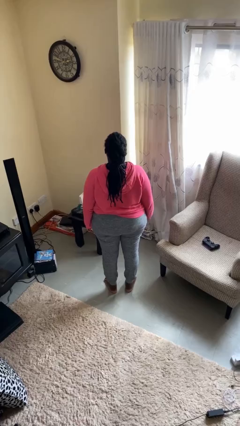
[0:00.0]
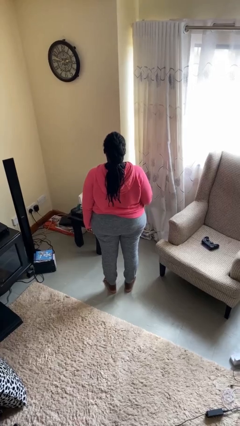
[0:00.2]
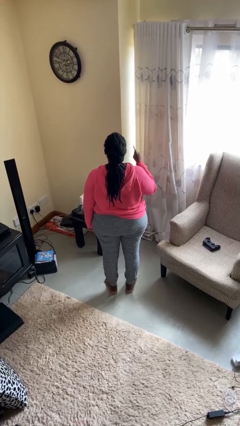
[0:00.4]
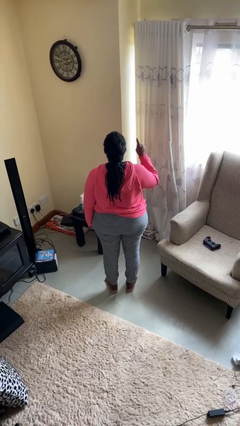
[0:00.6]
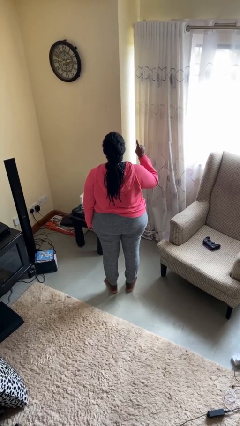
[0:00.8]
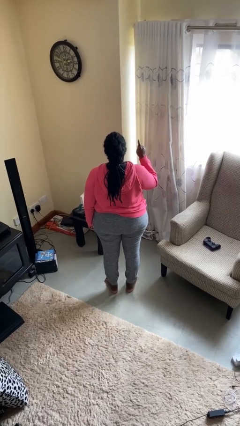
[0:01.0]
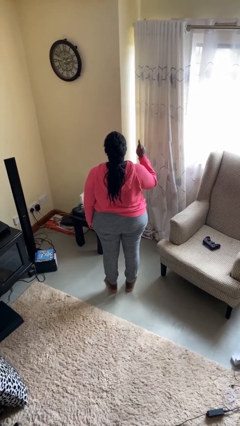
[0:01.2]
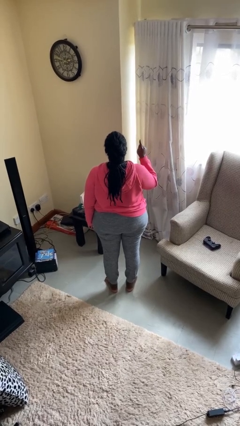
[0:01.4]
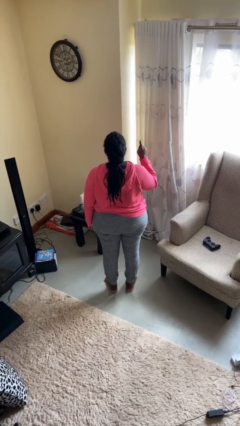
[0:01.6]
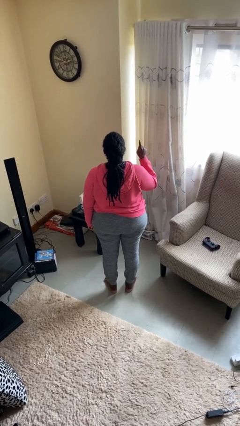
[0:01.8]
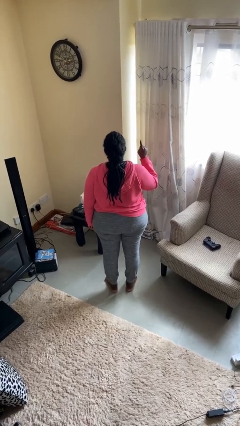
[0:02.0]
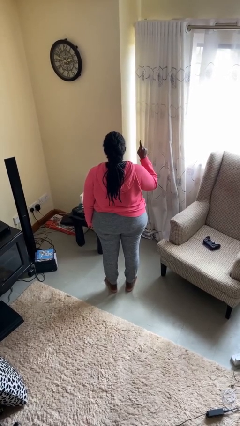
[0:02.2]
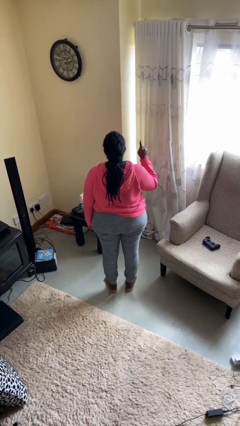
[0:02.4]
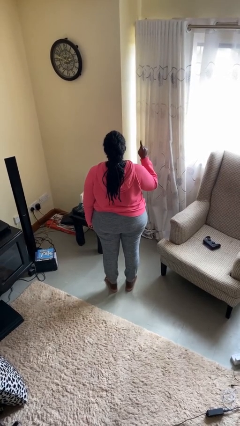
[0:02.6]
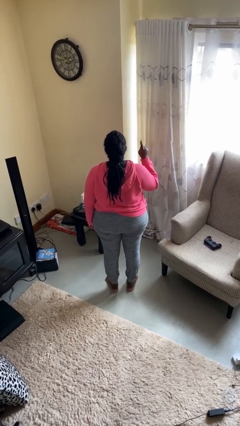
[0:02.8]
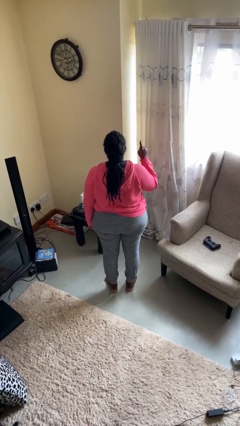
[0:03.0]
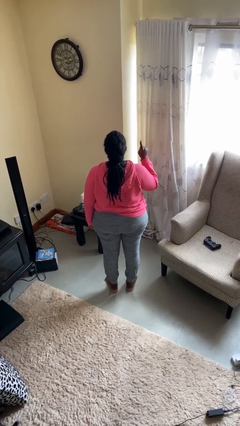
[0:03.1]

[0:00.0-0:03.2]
person gestures number one

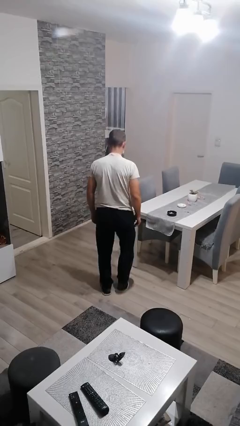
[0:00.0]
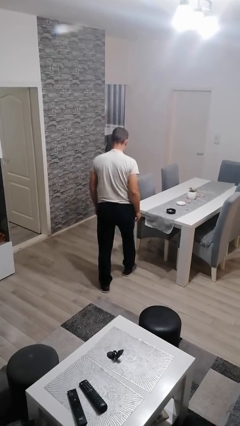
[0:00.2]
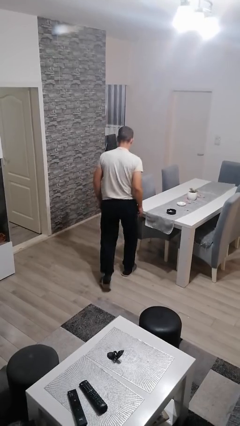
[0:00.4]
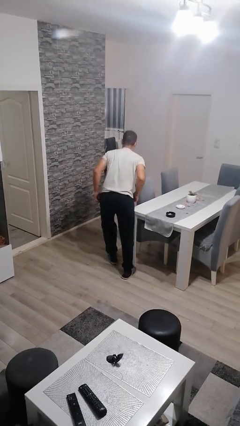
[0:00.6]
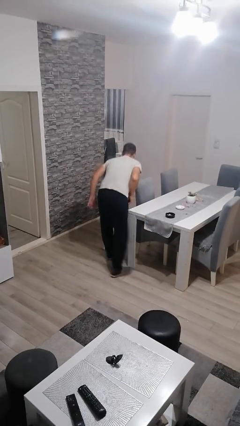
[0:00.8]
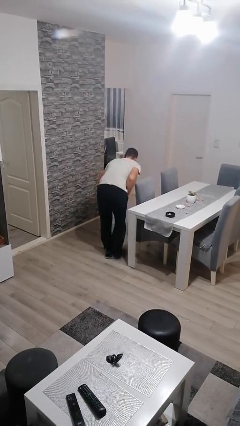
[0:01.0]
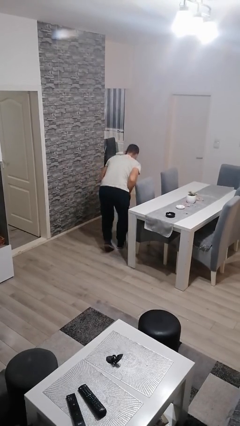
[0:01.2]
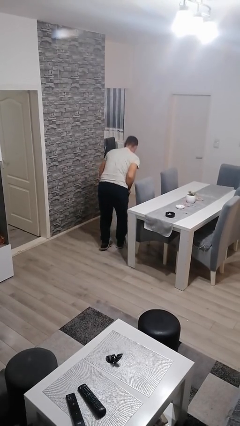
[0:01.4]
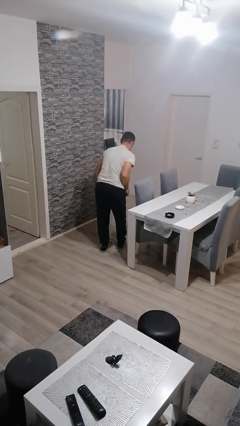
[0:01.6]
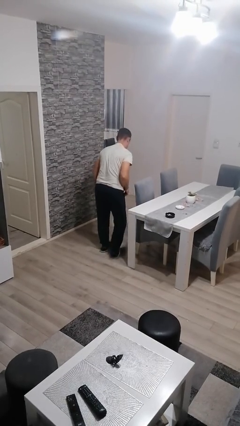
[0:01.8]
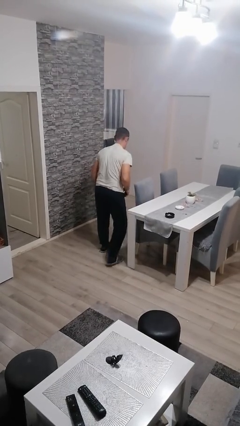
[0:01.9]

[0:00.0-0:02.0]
person bumps into table

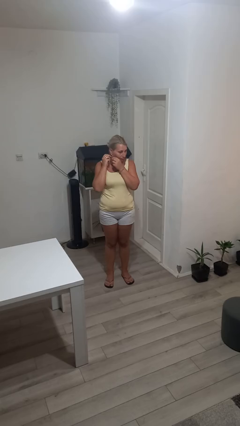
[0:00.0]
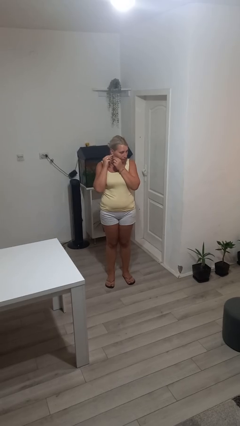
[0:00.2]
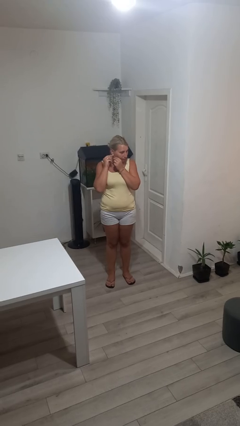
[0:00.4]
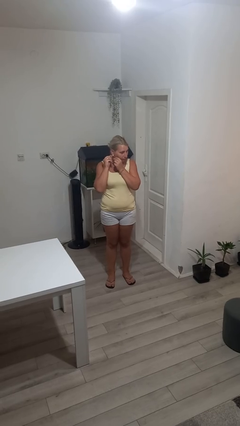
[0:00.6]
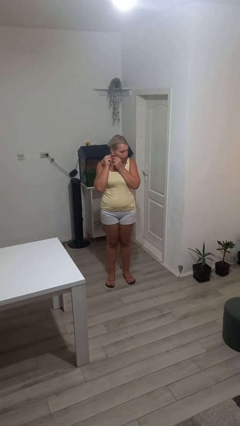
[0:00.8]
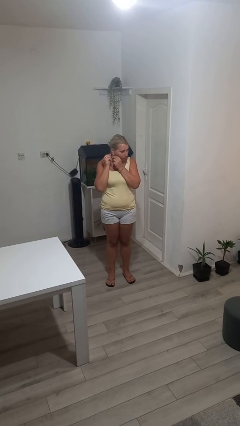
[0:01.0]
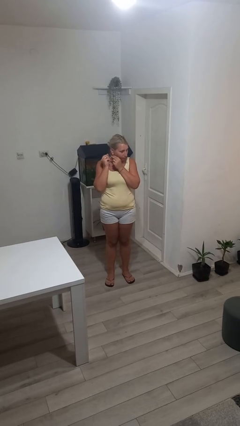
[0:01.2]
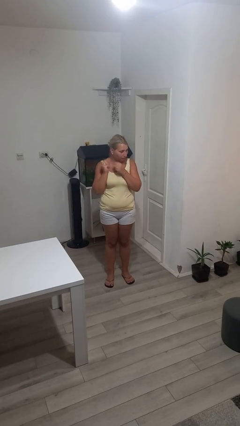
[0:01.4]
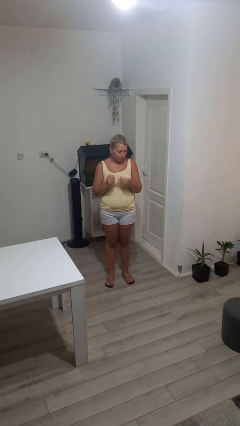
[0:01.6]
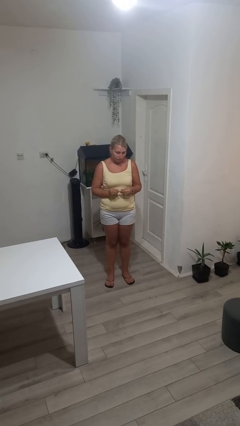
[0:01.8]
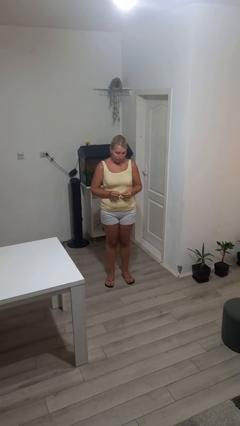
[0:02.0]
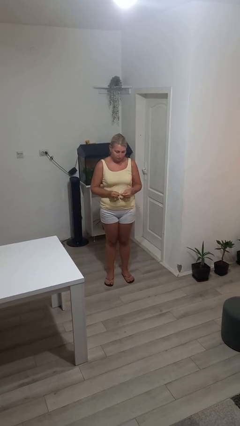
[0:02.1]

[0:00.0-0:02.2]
person takes off earrings

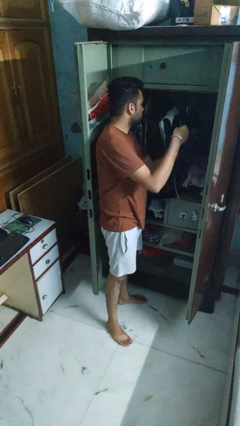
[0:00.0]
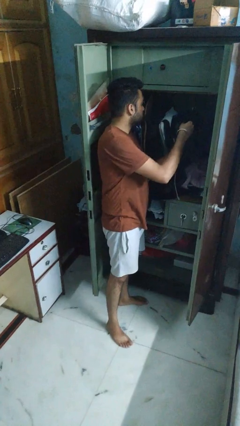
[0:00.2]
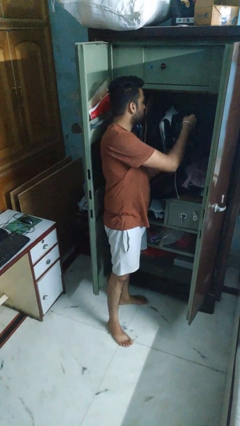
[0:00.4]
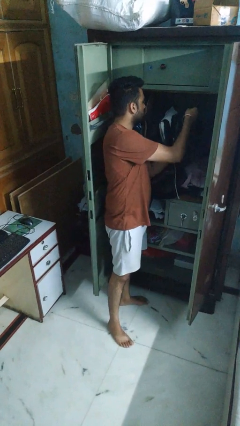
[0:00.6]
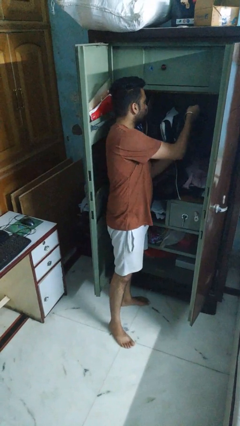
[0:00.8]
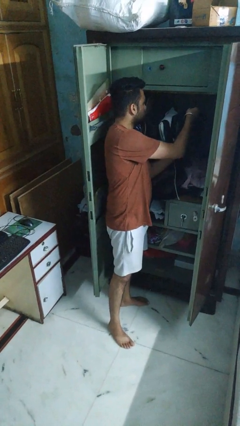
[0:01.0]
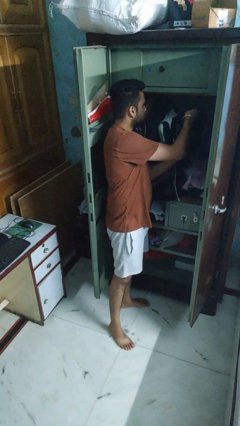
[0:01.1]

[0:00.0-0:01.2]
person puts clothes into closet

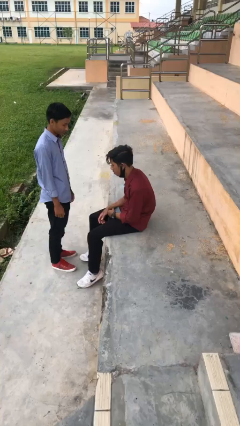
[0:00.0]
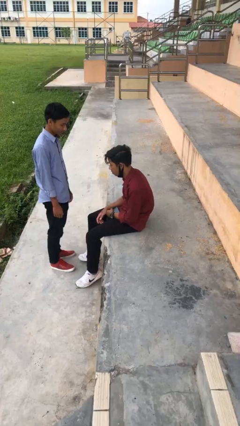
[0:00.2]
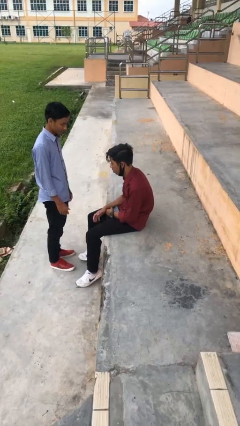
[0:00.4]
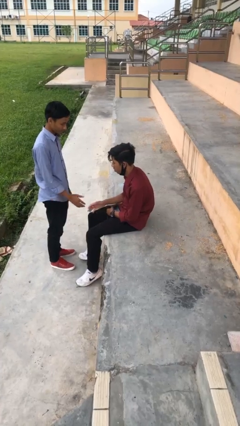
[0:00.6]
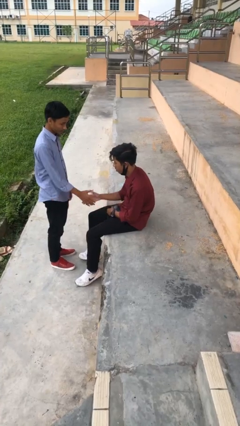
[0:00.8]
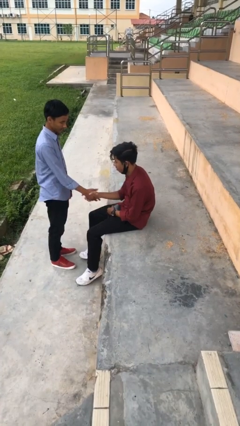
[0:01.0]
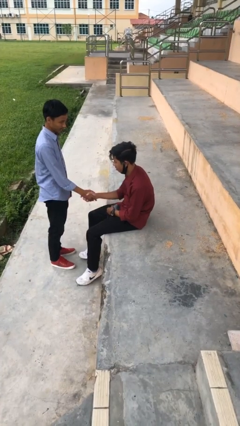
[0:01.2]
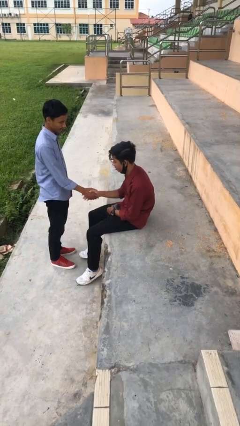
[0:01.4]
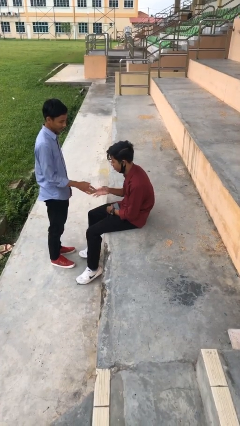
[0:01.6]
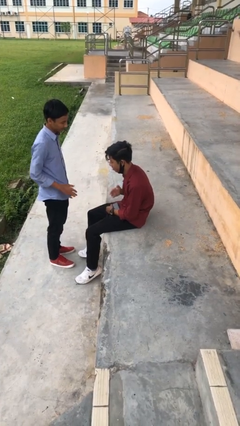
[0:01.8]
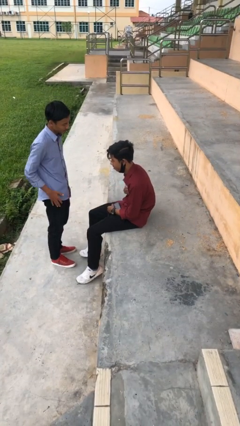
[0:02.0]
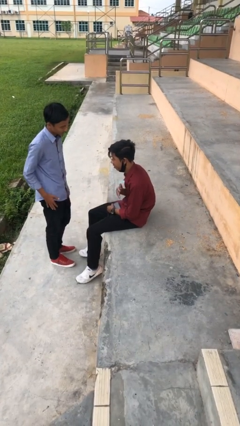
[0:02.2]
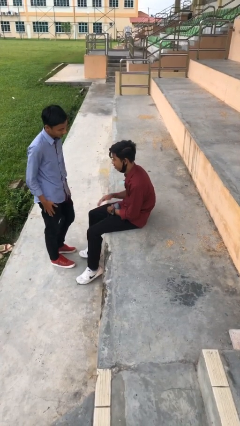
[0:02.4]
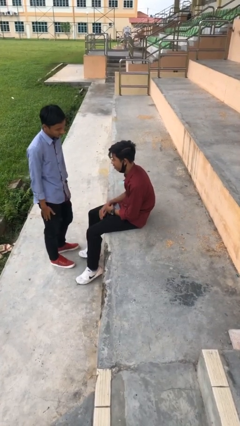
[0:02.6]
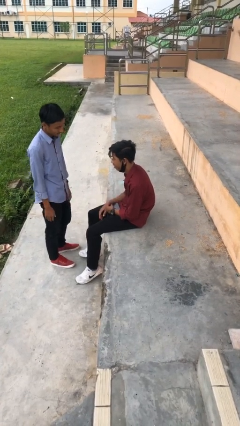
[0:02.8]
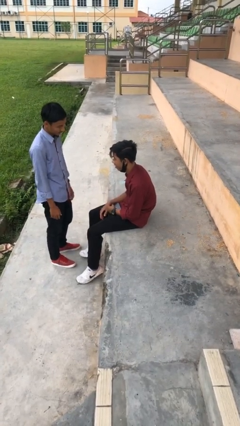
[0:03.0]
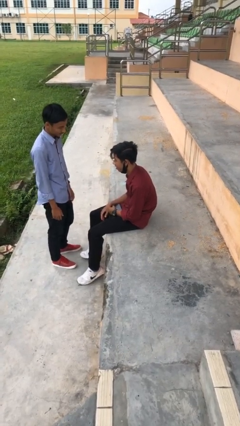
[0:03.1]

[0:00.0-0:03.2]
person shakes hand

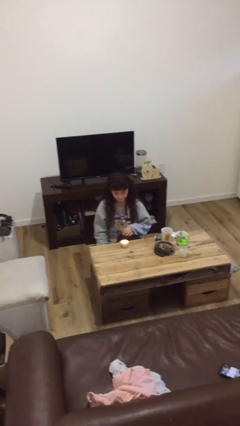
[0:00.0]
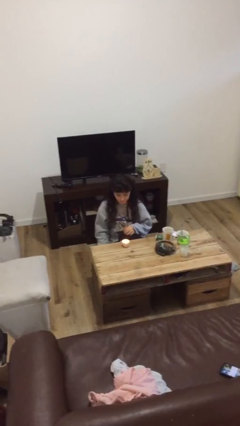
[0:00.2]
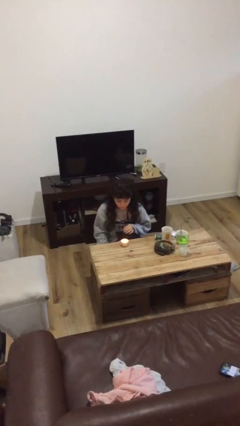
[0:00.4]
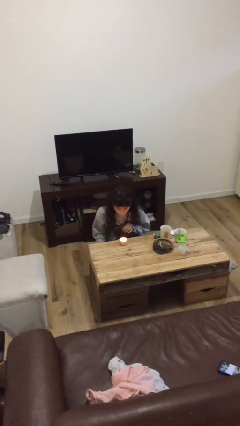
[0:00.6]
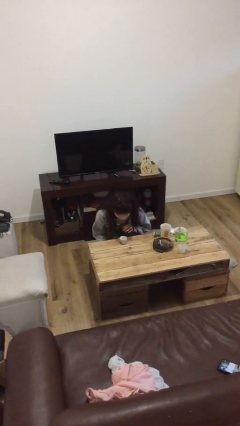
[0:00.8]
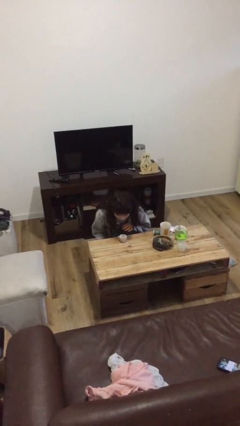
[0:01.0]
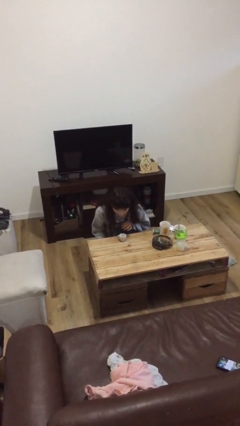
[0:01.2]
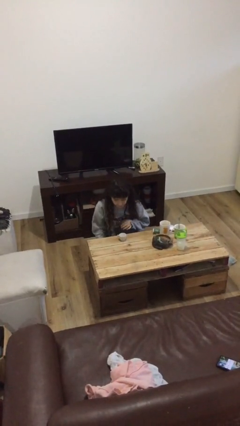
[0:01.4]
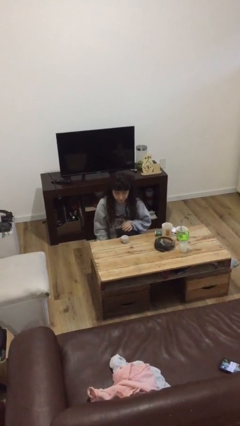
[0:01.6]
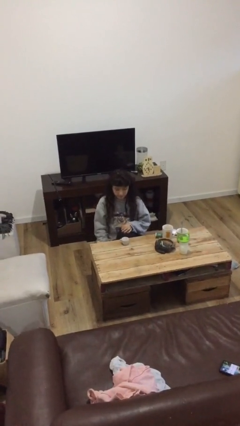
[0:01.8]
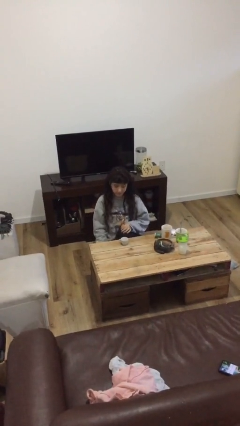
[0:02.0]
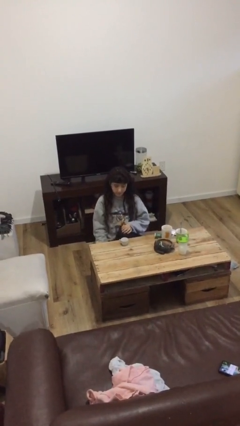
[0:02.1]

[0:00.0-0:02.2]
person extinguishes candle

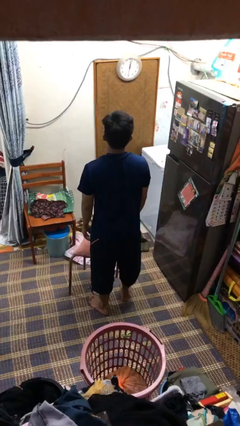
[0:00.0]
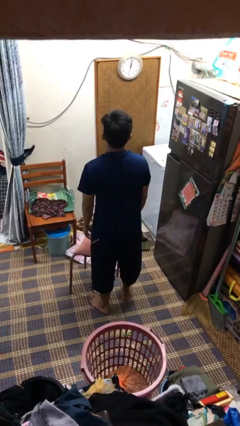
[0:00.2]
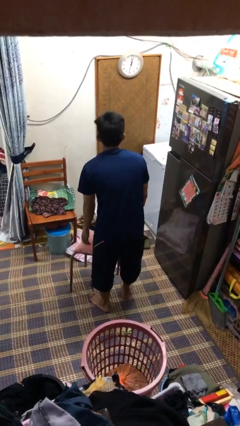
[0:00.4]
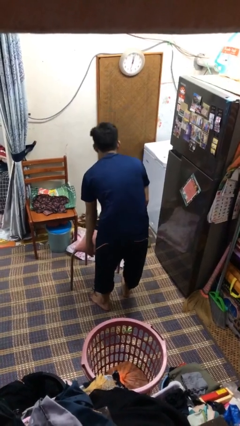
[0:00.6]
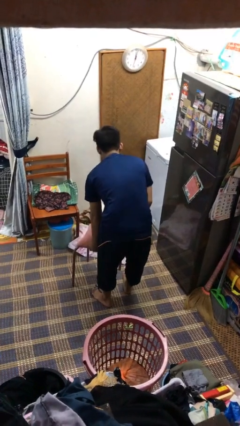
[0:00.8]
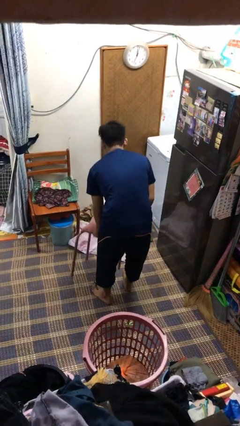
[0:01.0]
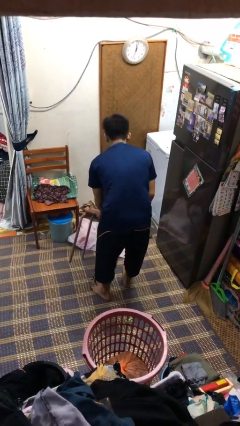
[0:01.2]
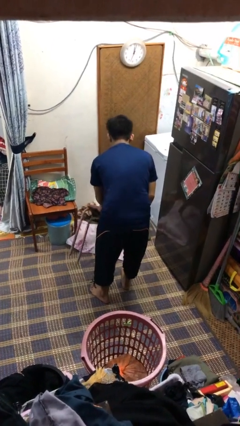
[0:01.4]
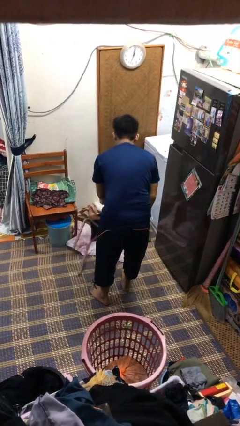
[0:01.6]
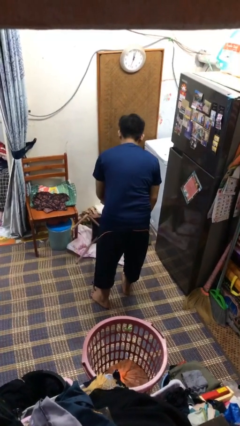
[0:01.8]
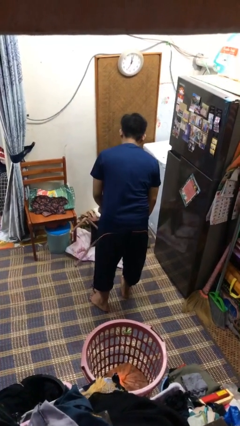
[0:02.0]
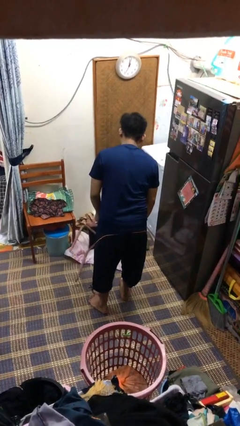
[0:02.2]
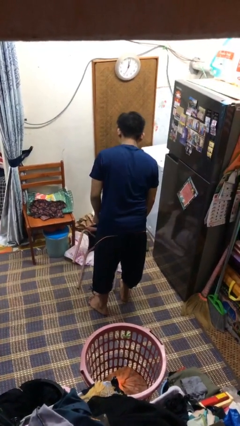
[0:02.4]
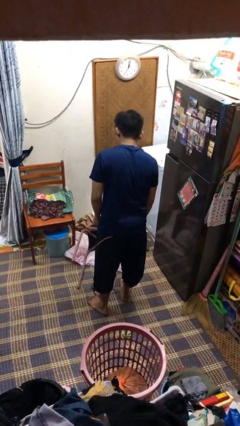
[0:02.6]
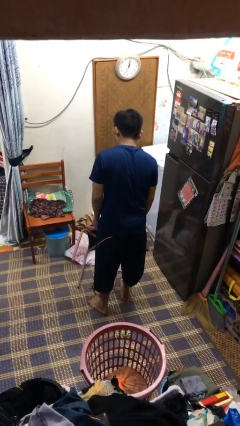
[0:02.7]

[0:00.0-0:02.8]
person knocks over furniture

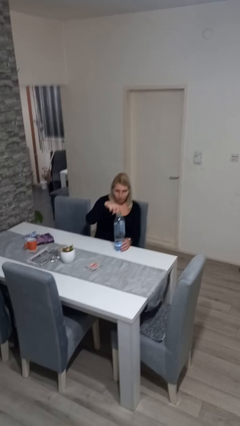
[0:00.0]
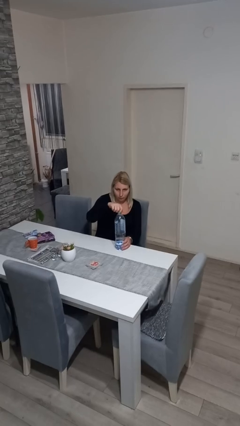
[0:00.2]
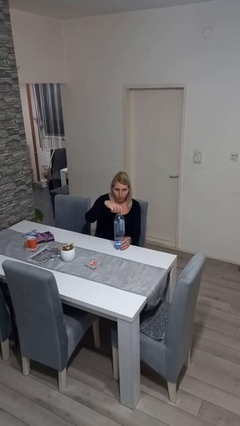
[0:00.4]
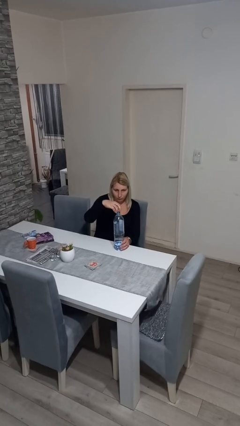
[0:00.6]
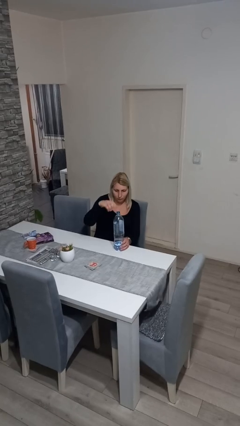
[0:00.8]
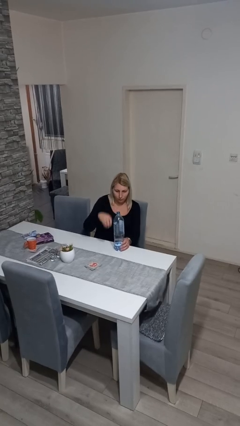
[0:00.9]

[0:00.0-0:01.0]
person unscrews lid from bottle
